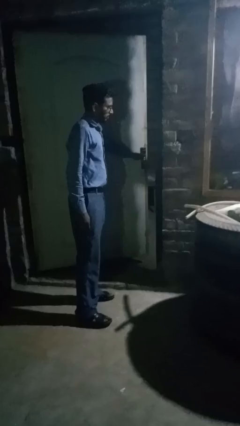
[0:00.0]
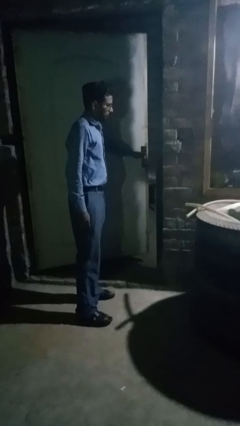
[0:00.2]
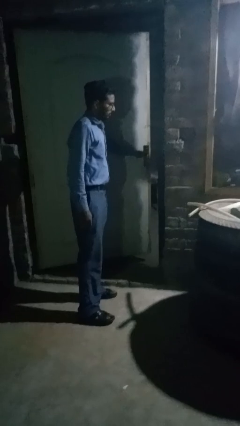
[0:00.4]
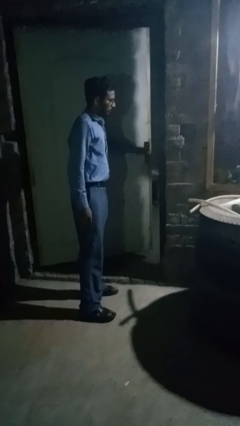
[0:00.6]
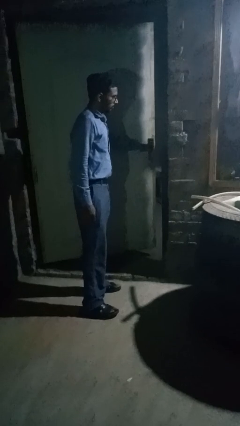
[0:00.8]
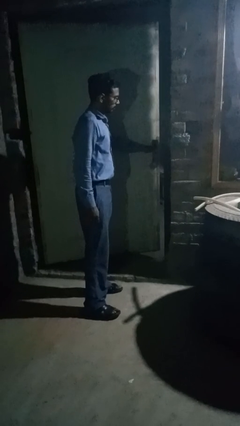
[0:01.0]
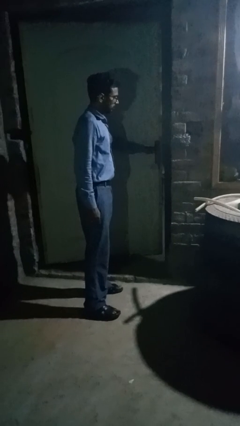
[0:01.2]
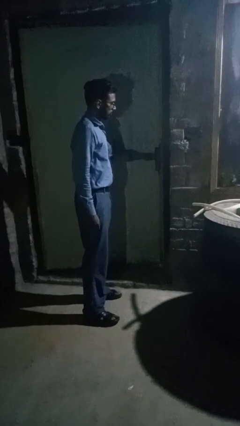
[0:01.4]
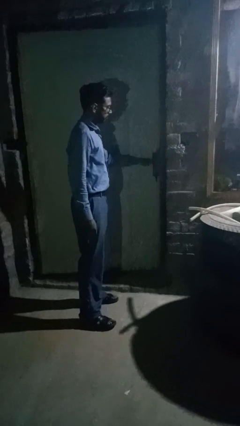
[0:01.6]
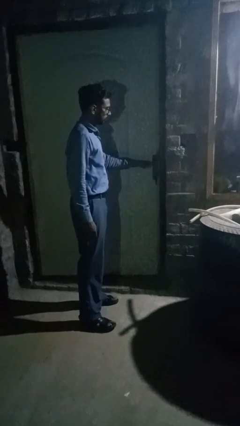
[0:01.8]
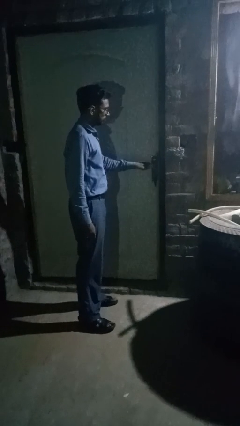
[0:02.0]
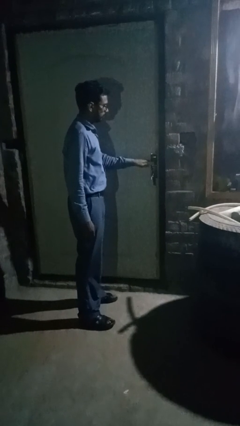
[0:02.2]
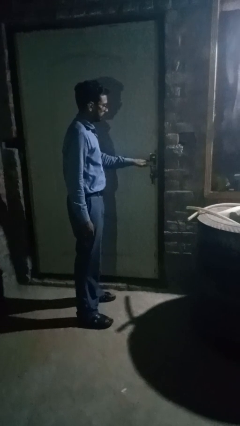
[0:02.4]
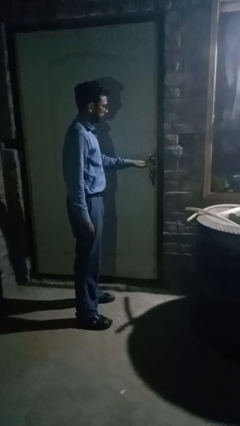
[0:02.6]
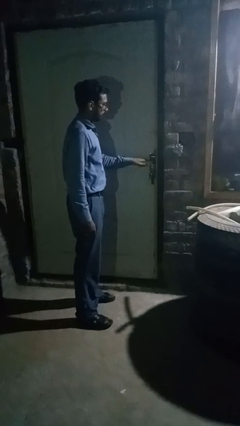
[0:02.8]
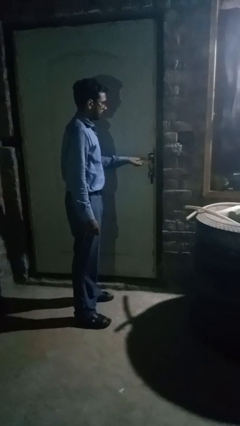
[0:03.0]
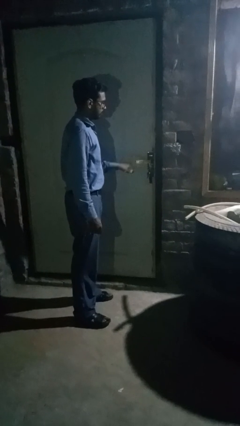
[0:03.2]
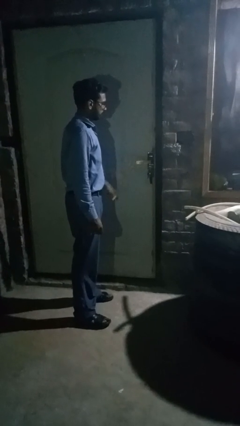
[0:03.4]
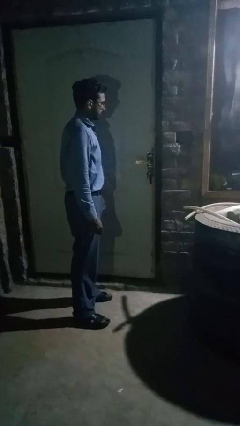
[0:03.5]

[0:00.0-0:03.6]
person closes facility door

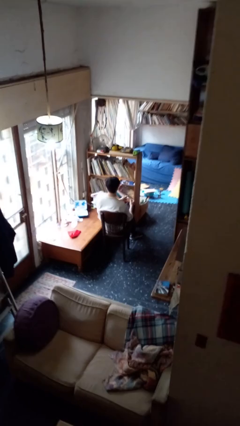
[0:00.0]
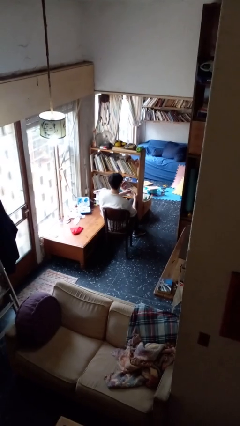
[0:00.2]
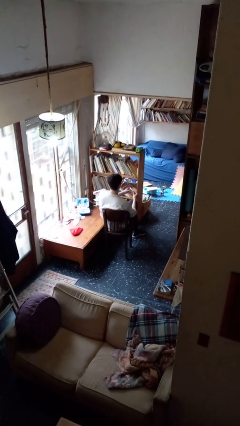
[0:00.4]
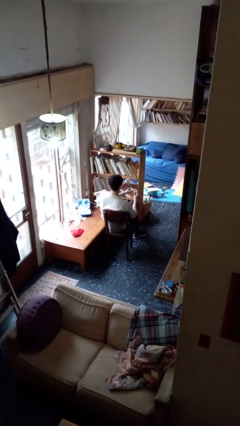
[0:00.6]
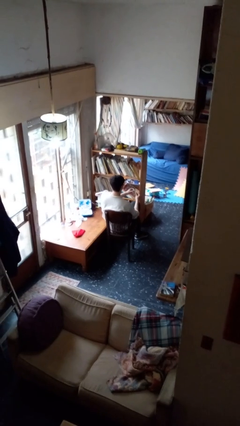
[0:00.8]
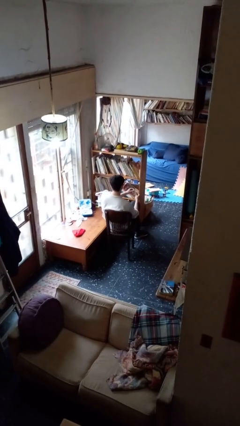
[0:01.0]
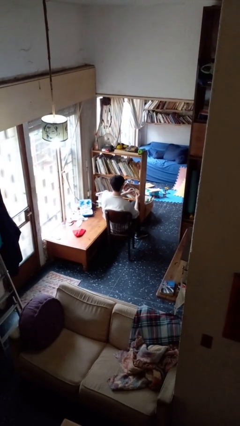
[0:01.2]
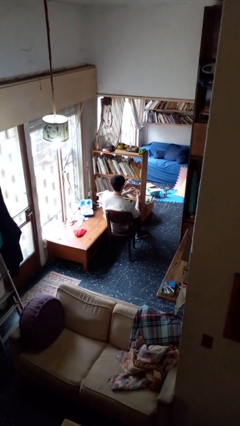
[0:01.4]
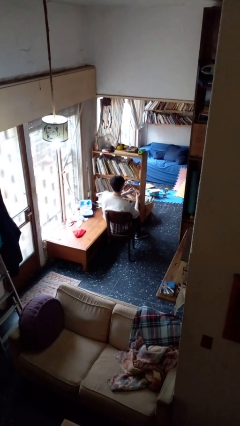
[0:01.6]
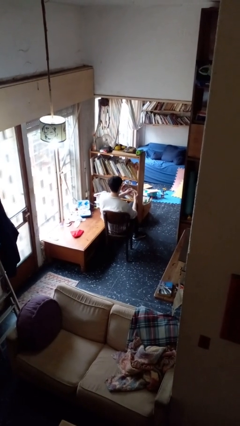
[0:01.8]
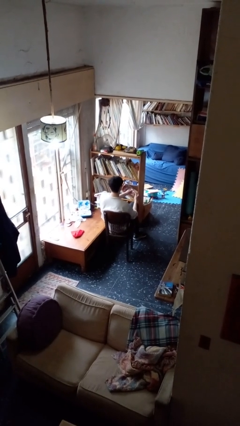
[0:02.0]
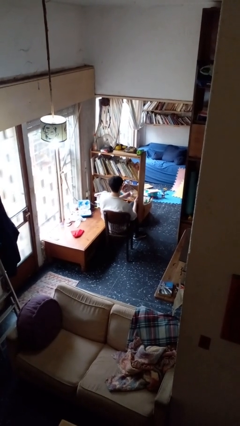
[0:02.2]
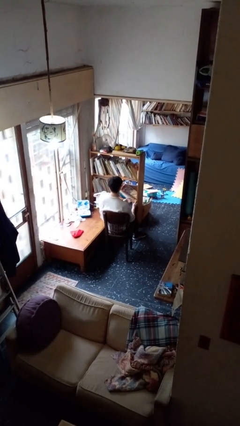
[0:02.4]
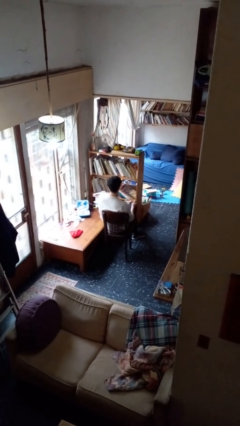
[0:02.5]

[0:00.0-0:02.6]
person clips fingernails

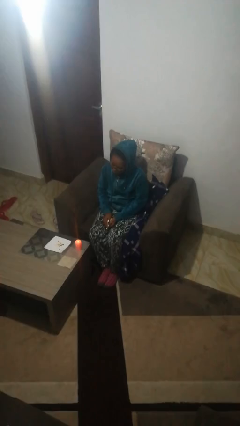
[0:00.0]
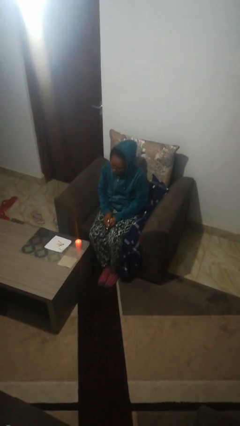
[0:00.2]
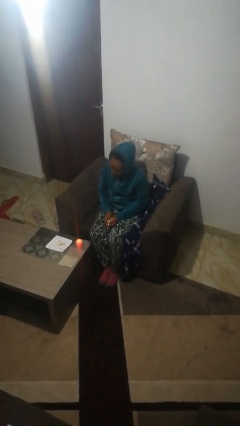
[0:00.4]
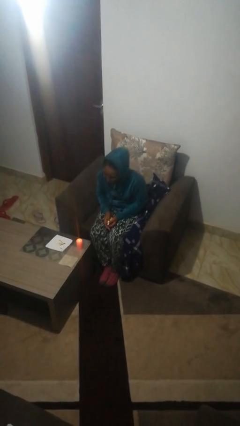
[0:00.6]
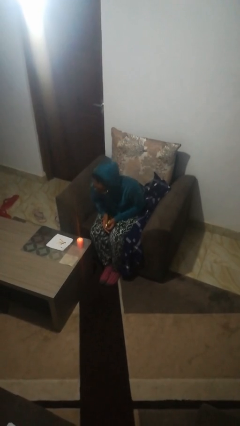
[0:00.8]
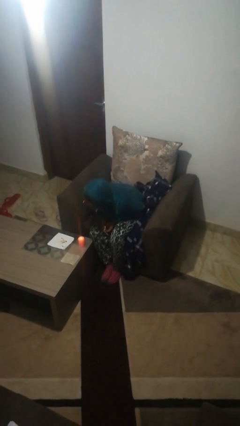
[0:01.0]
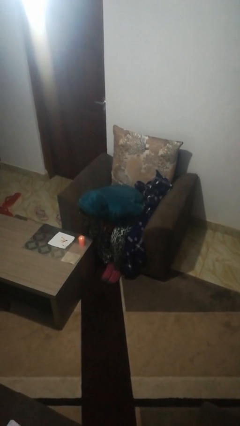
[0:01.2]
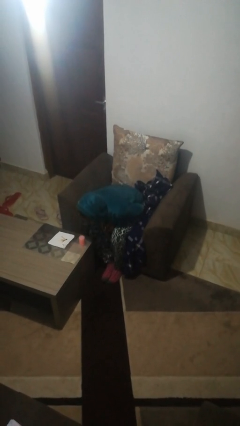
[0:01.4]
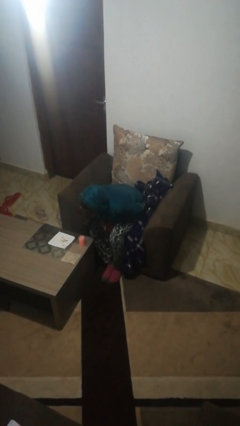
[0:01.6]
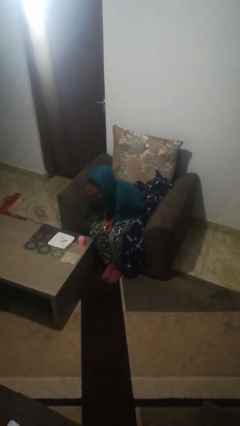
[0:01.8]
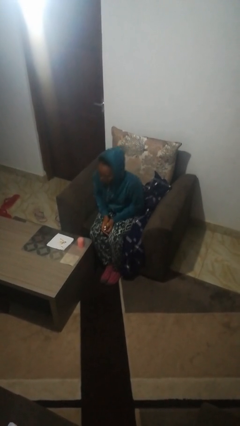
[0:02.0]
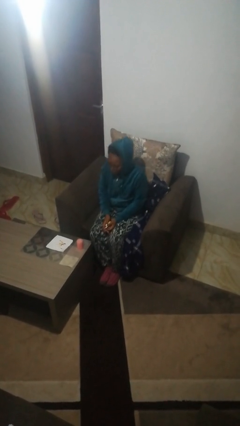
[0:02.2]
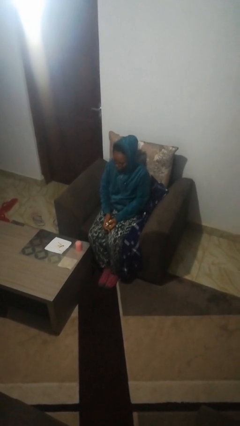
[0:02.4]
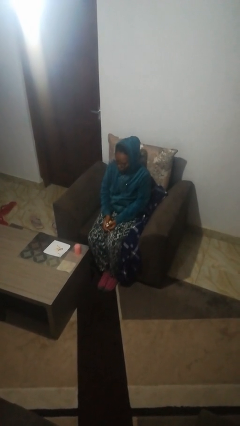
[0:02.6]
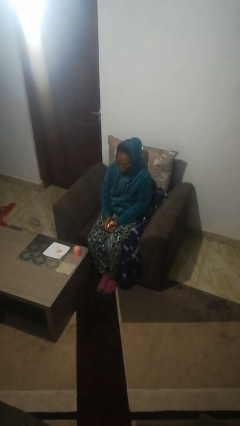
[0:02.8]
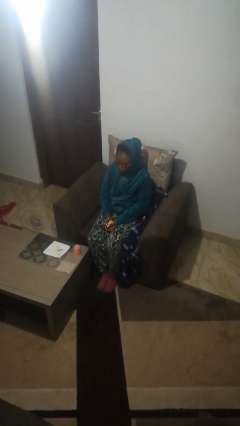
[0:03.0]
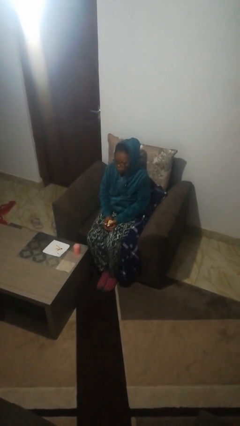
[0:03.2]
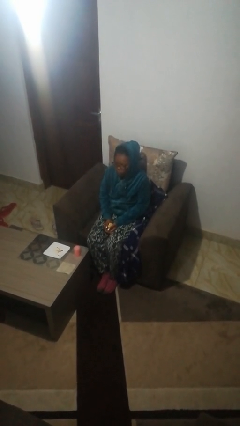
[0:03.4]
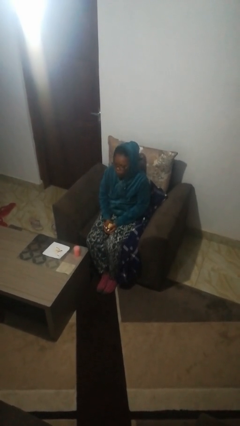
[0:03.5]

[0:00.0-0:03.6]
person extinguishes candle

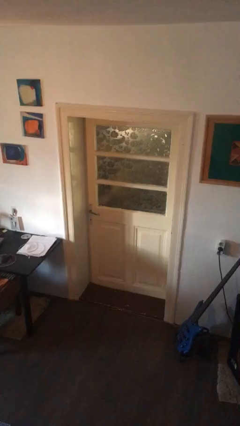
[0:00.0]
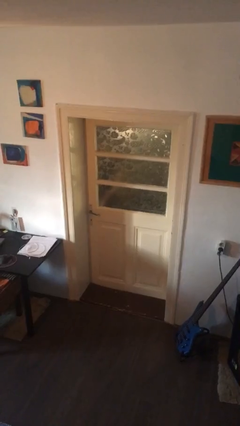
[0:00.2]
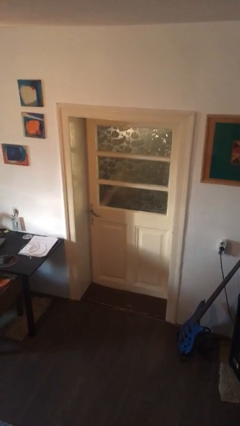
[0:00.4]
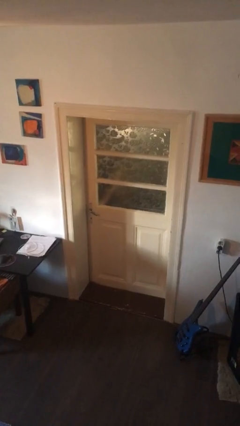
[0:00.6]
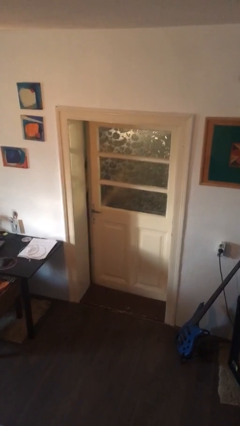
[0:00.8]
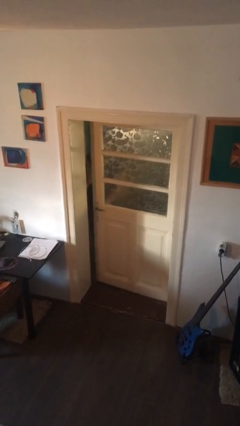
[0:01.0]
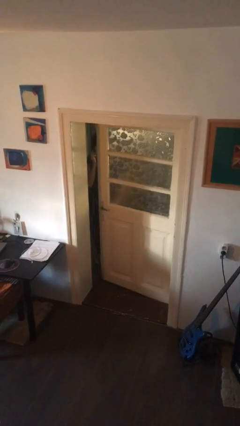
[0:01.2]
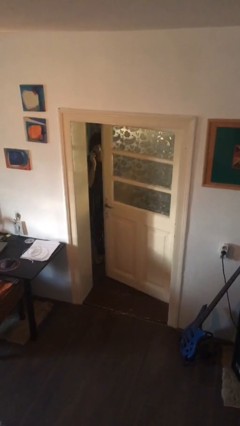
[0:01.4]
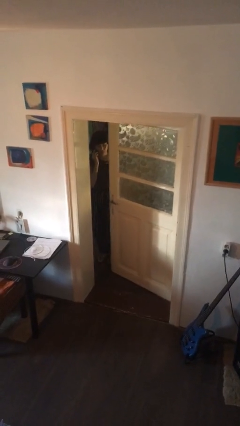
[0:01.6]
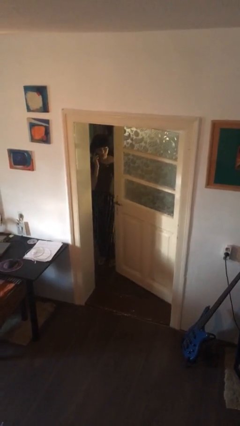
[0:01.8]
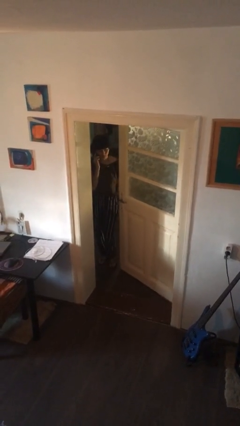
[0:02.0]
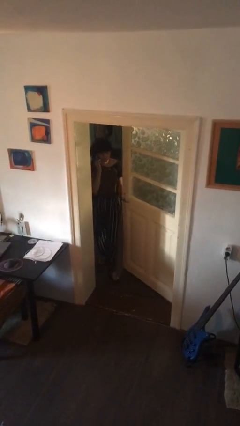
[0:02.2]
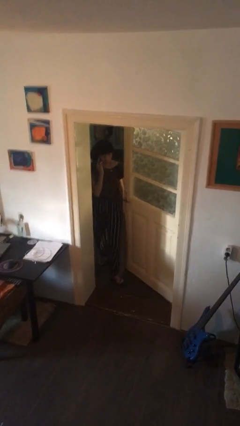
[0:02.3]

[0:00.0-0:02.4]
person opens facility door

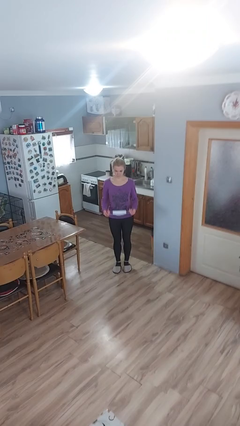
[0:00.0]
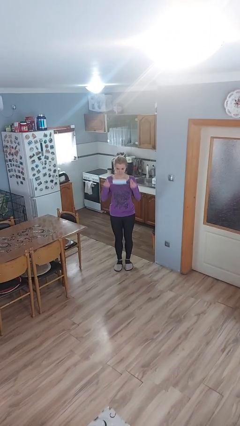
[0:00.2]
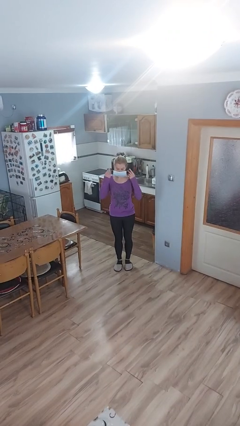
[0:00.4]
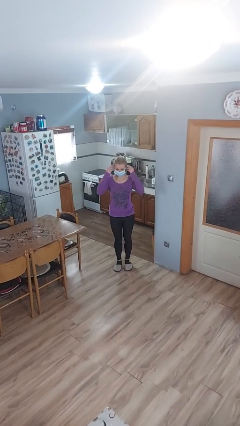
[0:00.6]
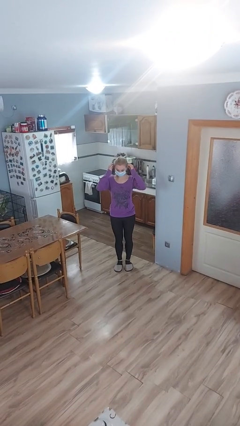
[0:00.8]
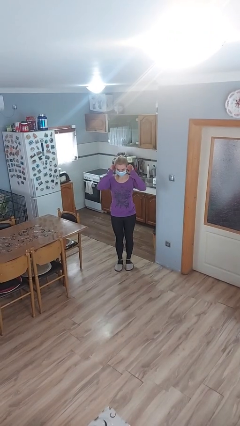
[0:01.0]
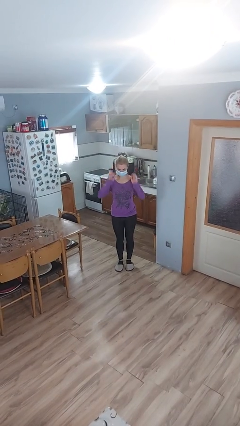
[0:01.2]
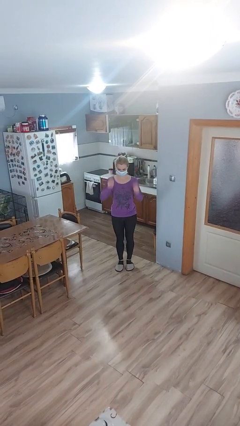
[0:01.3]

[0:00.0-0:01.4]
person puts on facemask

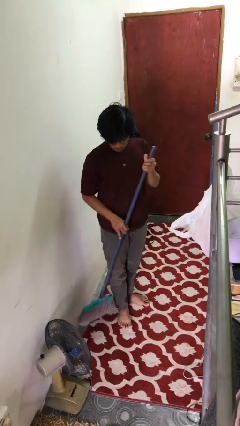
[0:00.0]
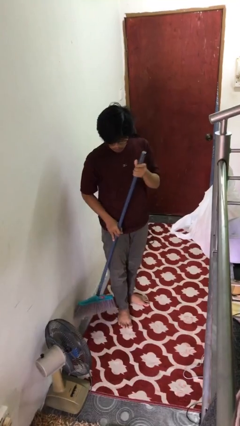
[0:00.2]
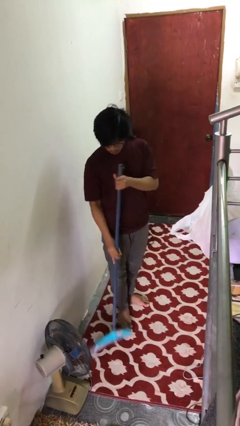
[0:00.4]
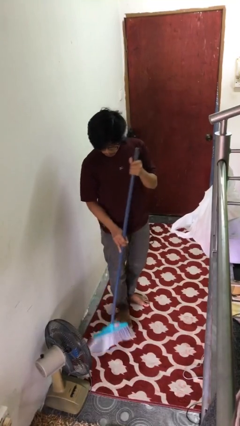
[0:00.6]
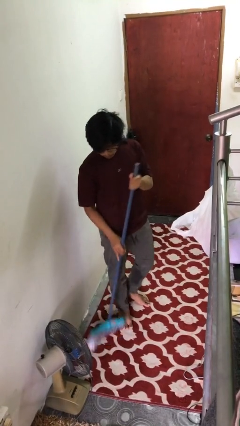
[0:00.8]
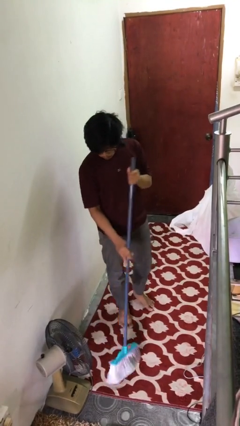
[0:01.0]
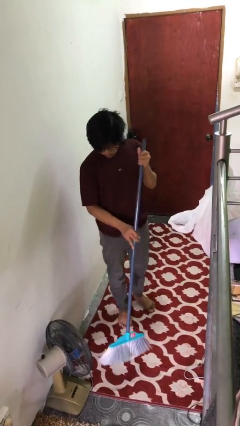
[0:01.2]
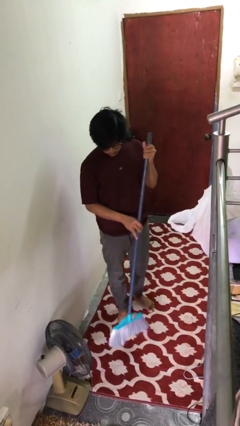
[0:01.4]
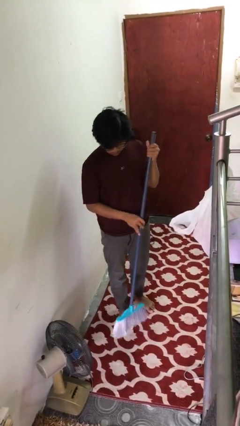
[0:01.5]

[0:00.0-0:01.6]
person sweeps floor

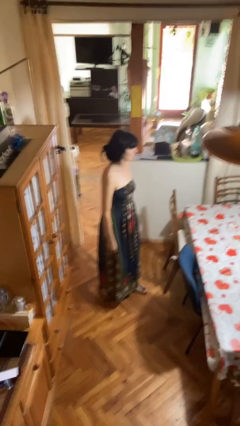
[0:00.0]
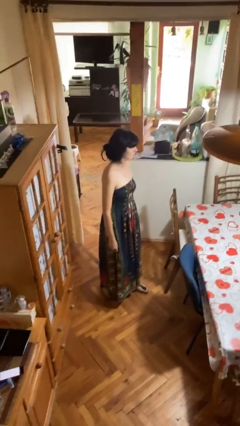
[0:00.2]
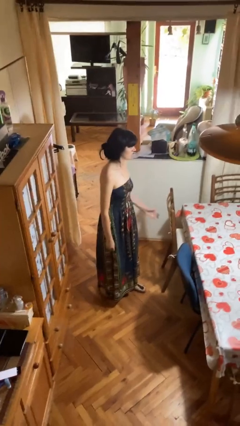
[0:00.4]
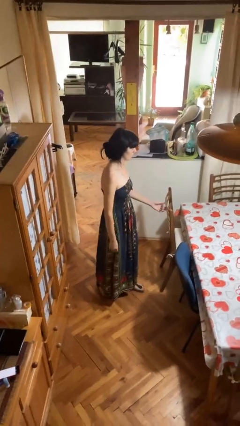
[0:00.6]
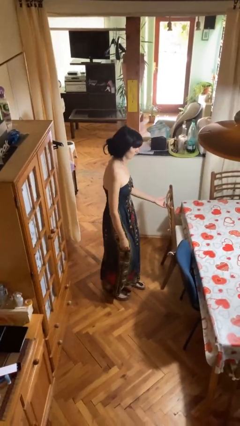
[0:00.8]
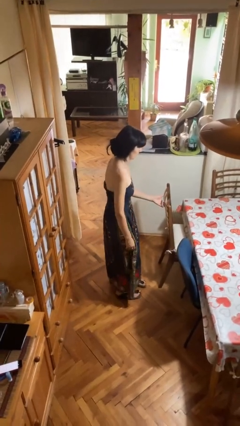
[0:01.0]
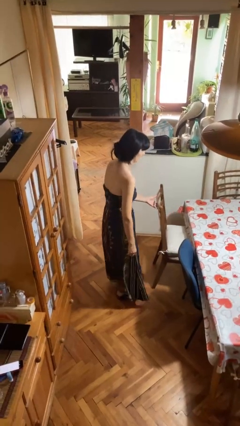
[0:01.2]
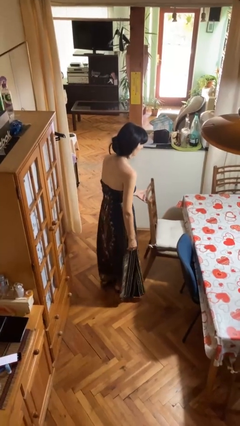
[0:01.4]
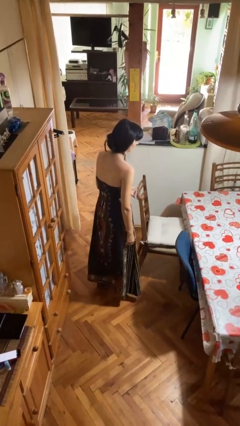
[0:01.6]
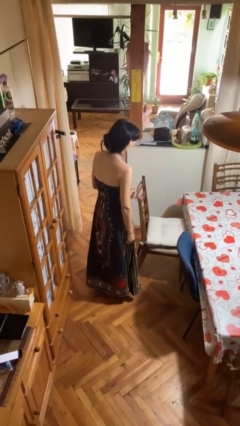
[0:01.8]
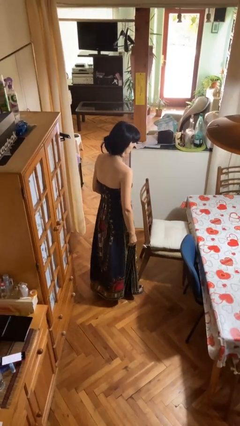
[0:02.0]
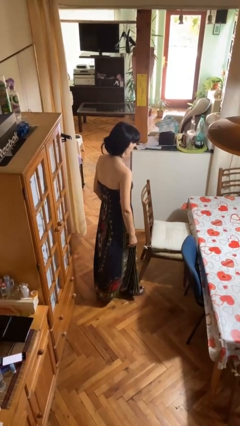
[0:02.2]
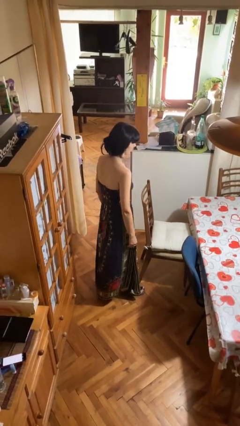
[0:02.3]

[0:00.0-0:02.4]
person pulls out chair
